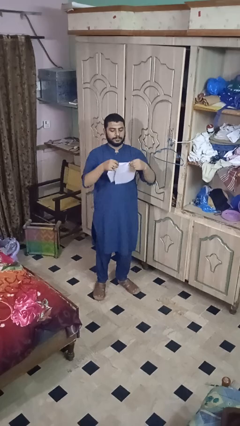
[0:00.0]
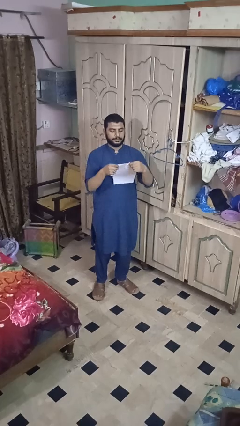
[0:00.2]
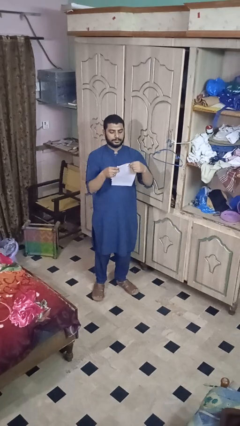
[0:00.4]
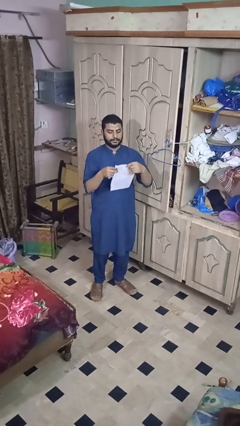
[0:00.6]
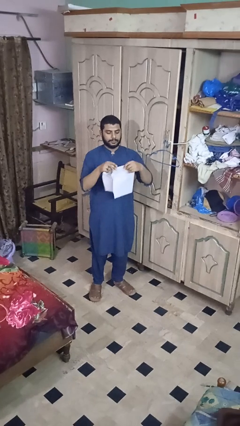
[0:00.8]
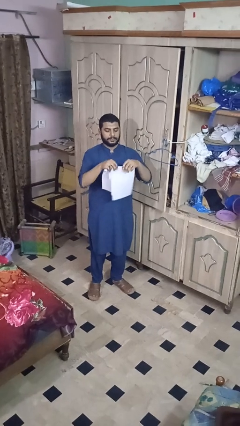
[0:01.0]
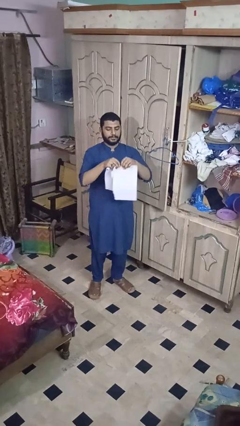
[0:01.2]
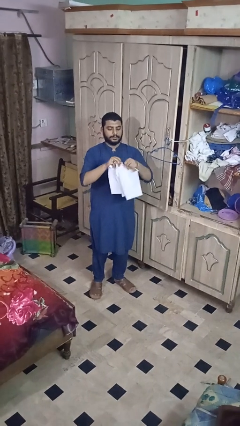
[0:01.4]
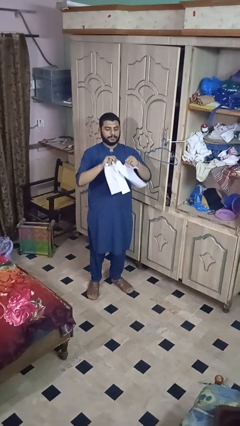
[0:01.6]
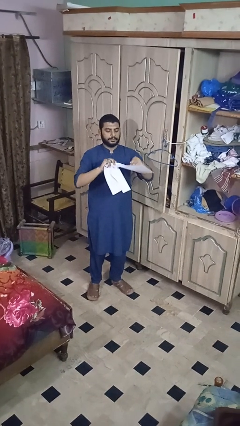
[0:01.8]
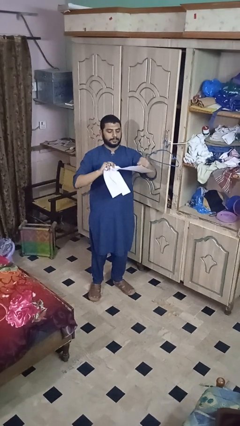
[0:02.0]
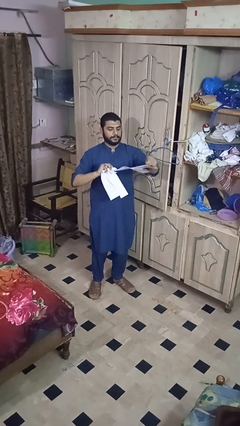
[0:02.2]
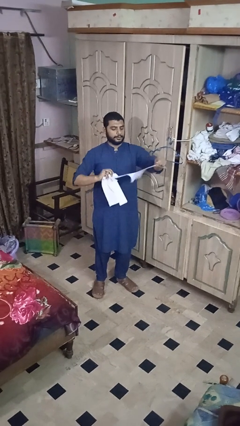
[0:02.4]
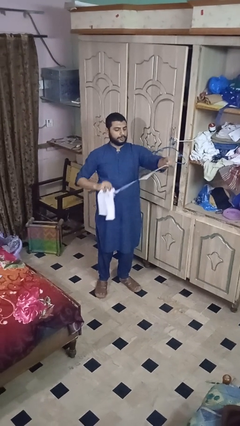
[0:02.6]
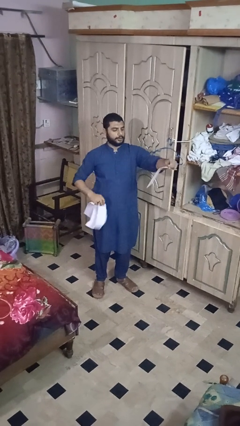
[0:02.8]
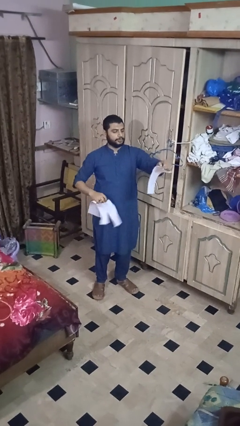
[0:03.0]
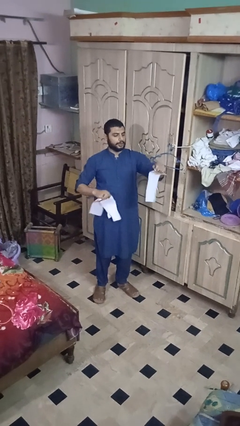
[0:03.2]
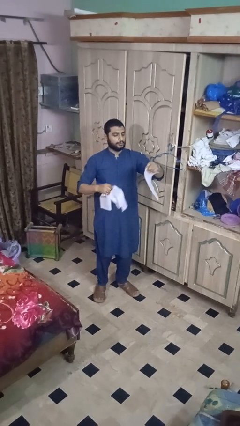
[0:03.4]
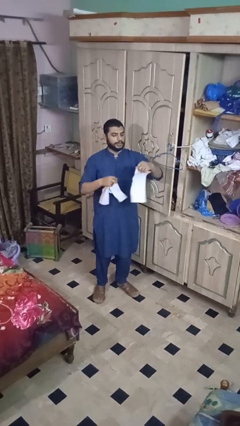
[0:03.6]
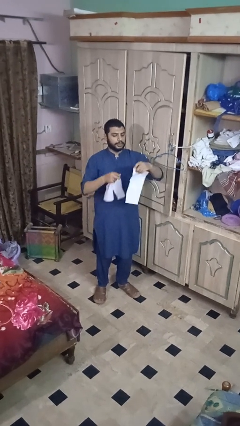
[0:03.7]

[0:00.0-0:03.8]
person tears paper

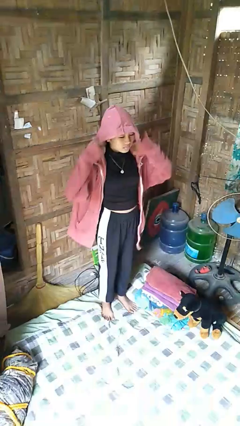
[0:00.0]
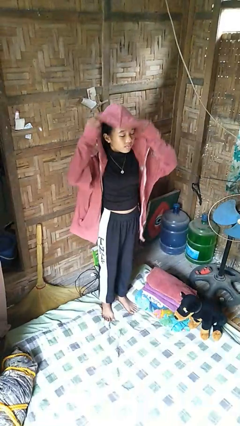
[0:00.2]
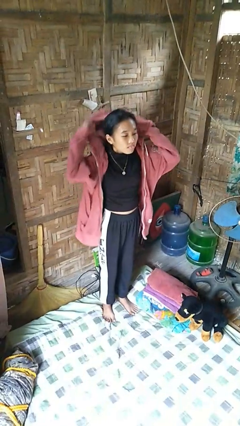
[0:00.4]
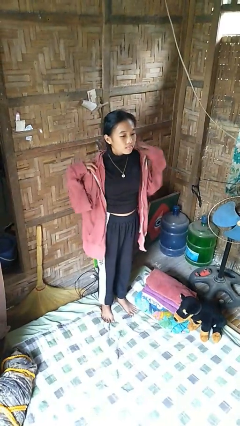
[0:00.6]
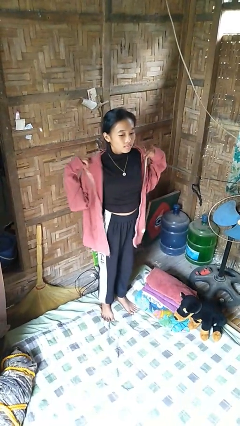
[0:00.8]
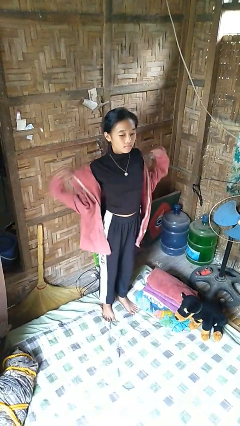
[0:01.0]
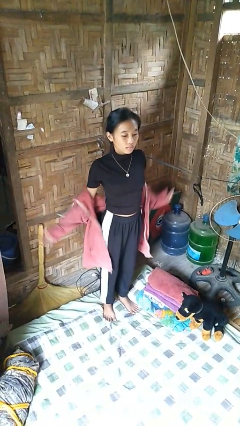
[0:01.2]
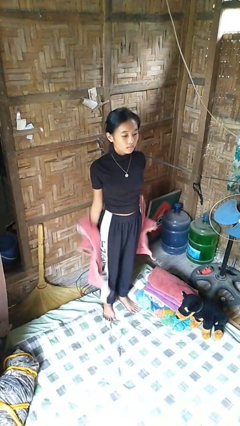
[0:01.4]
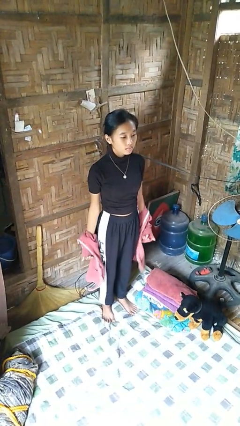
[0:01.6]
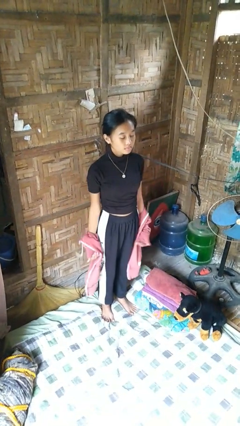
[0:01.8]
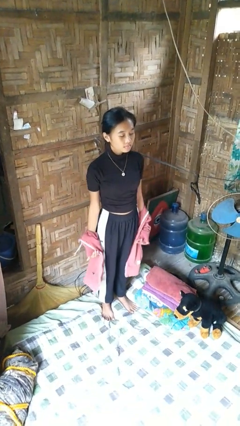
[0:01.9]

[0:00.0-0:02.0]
person takes off hoodie

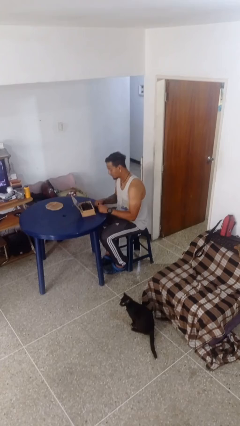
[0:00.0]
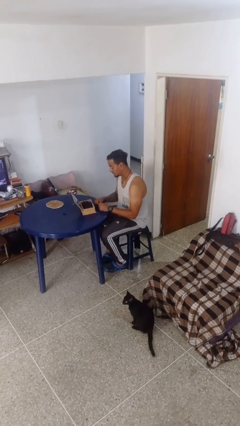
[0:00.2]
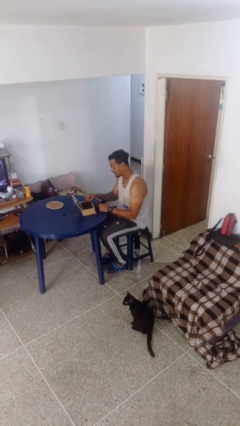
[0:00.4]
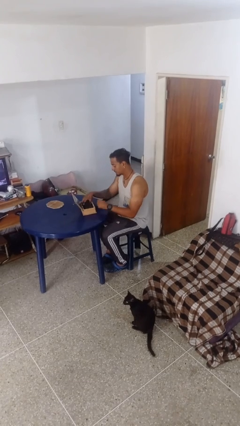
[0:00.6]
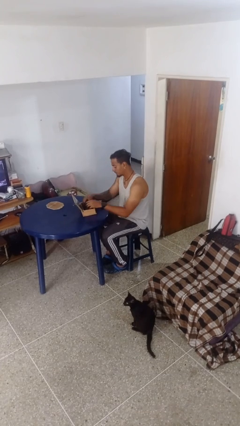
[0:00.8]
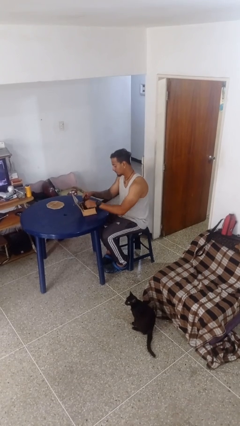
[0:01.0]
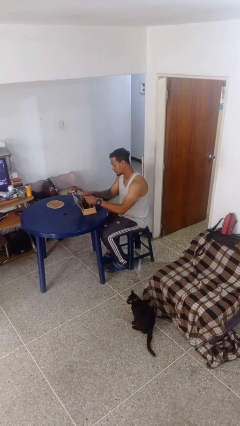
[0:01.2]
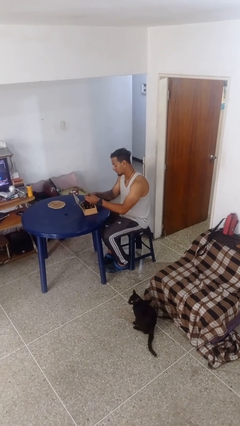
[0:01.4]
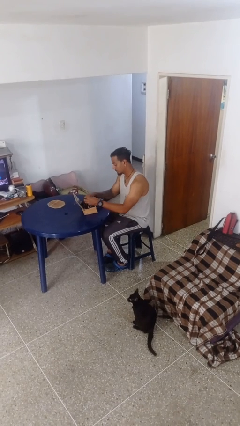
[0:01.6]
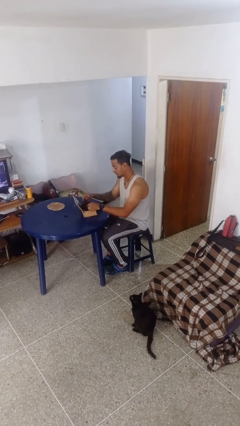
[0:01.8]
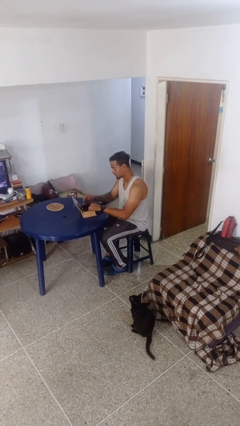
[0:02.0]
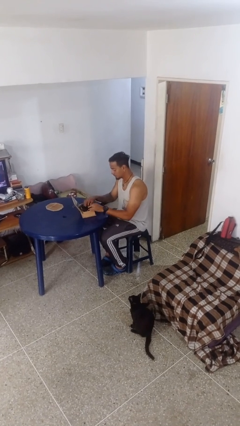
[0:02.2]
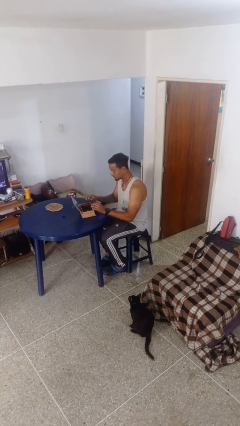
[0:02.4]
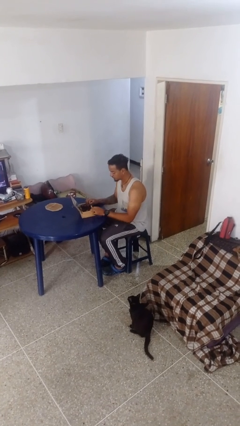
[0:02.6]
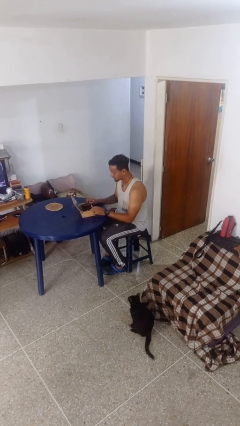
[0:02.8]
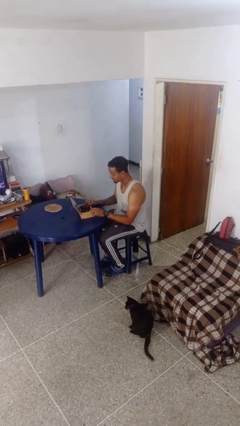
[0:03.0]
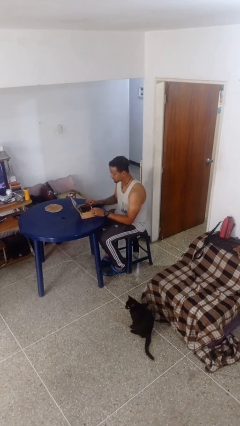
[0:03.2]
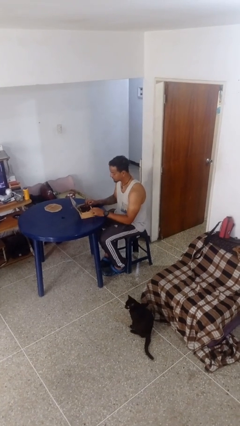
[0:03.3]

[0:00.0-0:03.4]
person searches jewelry box

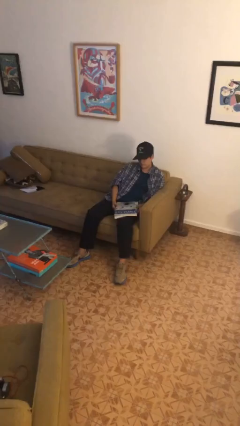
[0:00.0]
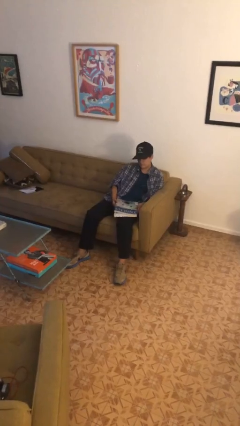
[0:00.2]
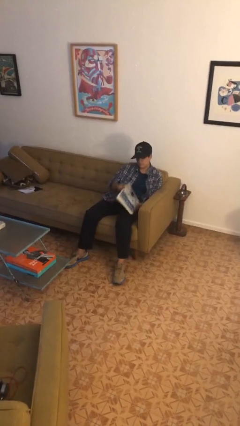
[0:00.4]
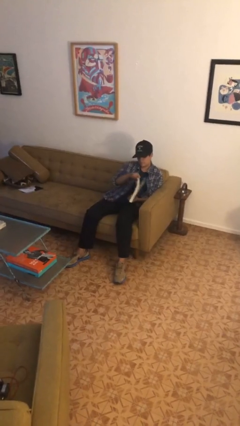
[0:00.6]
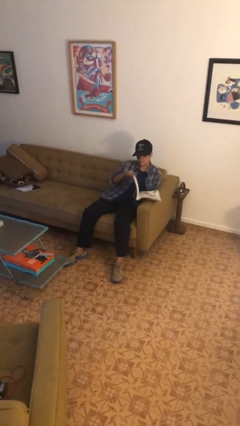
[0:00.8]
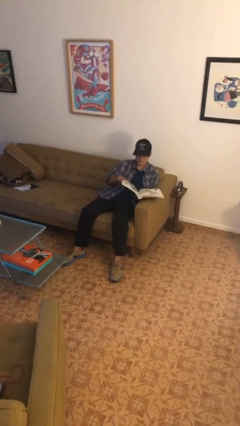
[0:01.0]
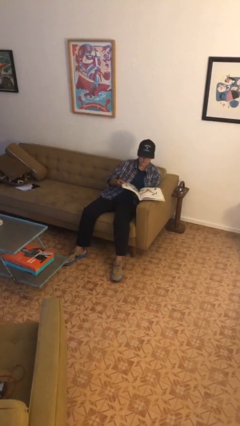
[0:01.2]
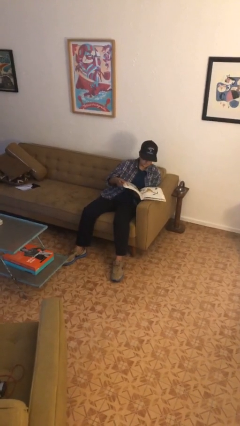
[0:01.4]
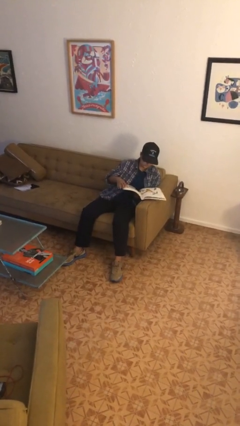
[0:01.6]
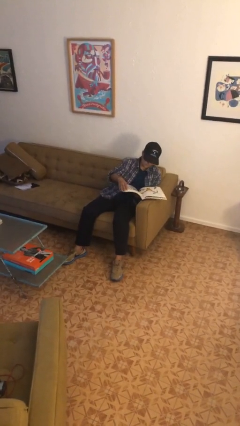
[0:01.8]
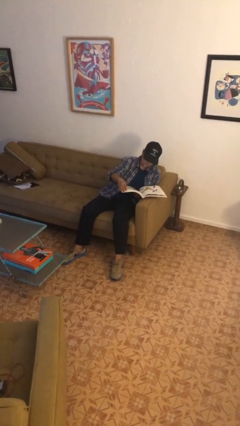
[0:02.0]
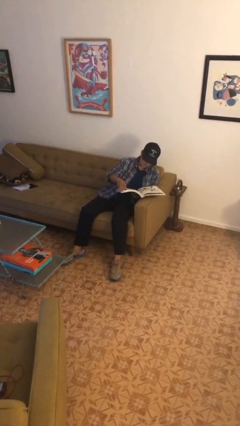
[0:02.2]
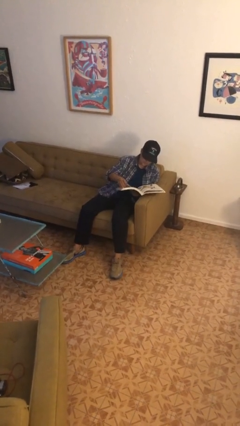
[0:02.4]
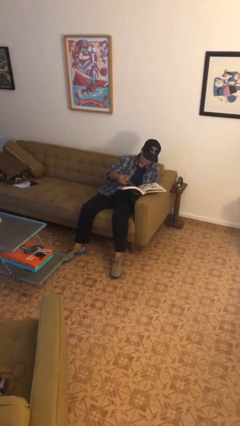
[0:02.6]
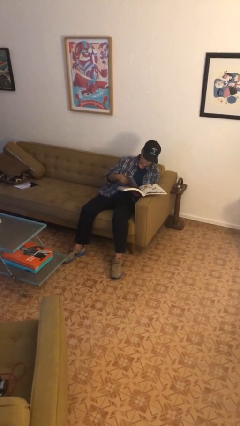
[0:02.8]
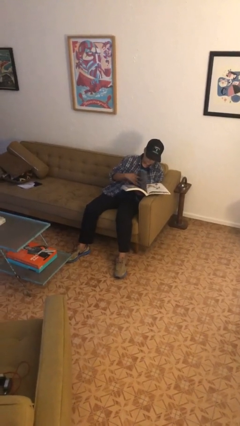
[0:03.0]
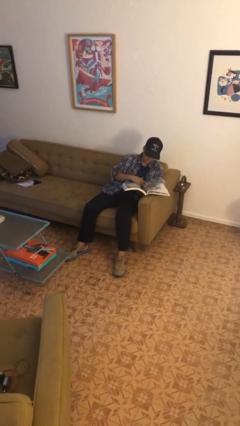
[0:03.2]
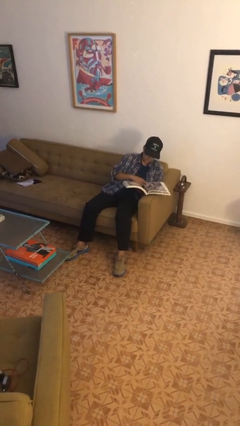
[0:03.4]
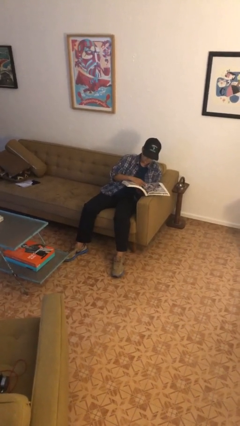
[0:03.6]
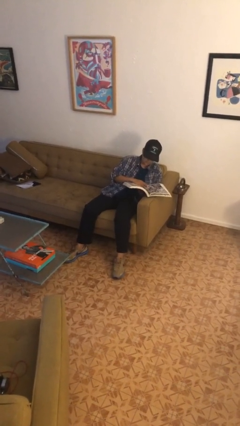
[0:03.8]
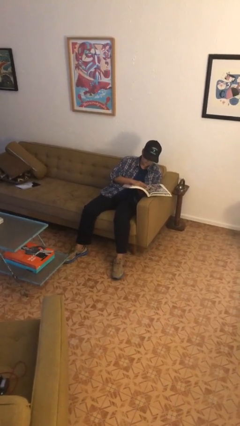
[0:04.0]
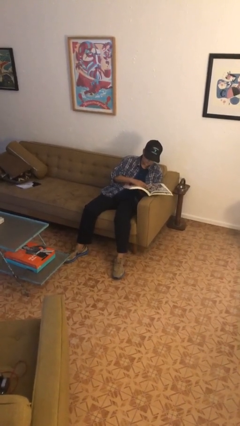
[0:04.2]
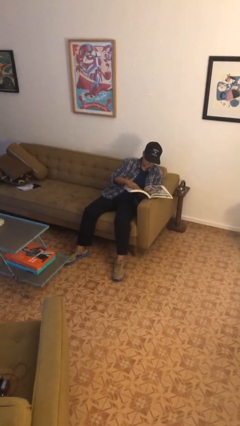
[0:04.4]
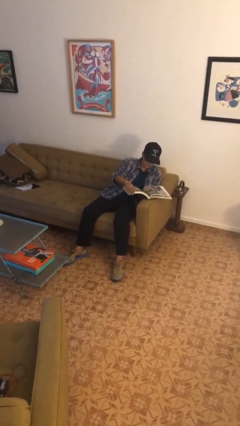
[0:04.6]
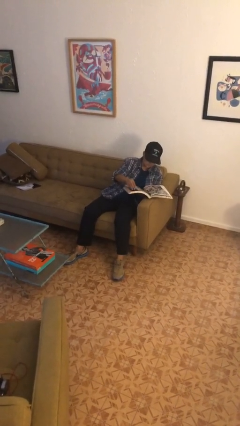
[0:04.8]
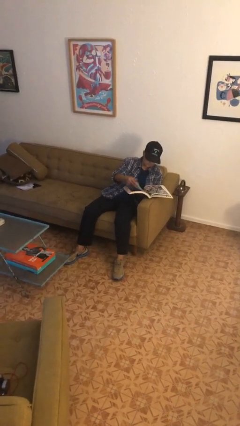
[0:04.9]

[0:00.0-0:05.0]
person reads book

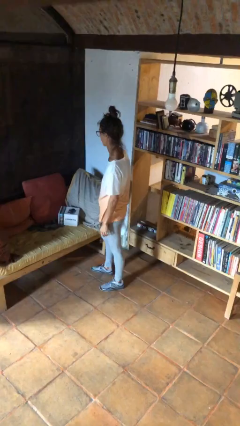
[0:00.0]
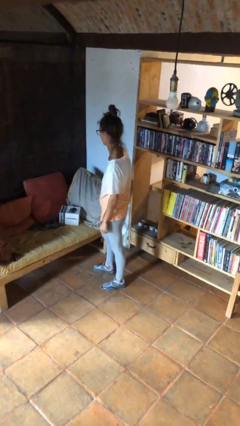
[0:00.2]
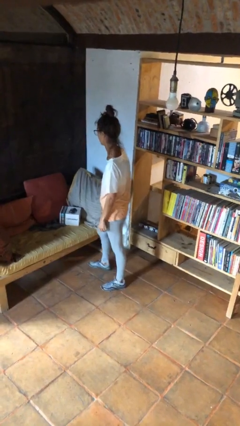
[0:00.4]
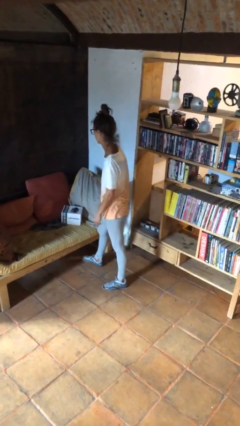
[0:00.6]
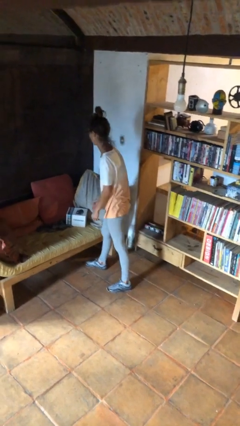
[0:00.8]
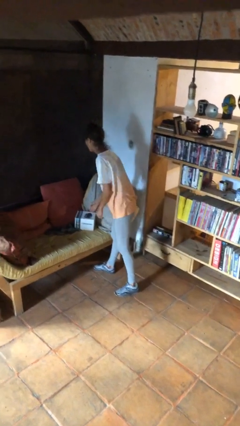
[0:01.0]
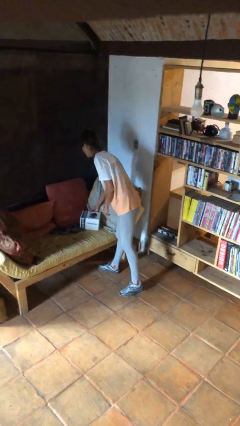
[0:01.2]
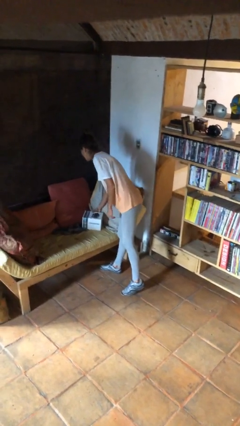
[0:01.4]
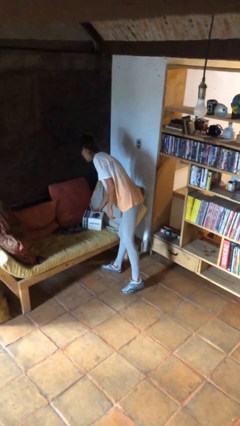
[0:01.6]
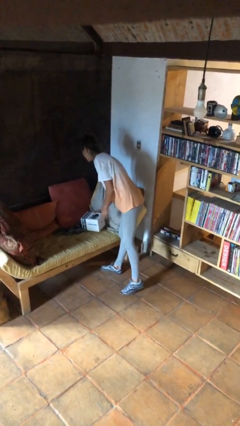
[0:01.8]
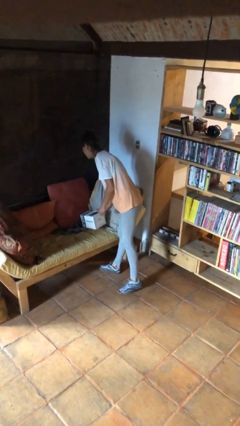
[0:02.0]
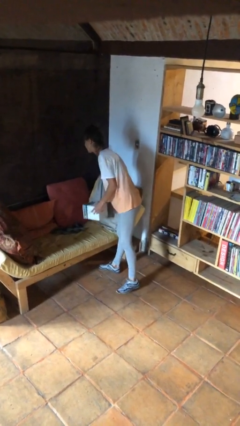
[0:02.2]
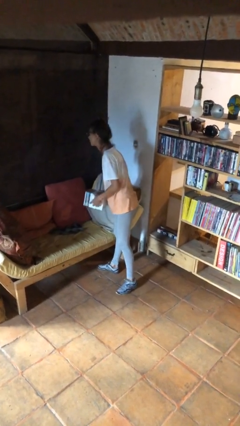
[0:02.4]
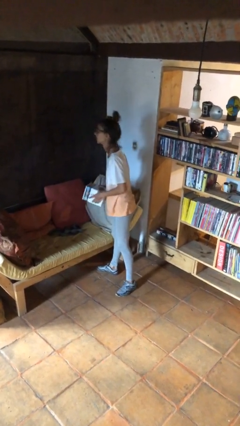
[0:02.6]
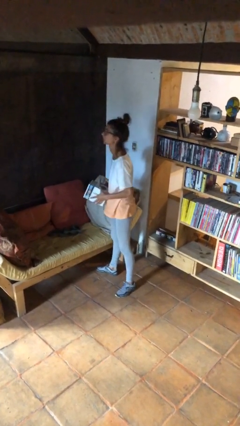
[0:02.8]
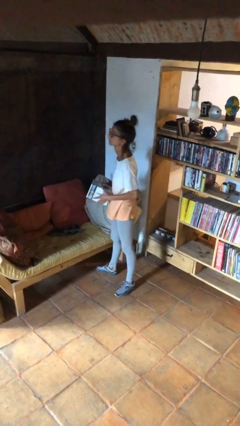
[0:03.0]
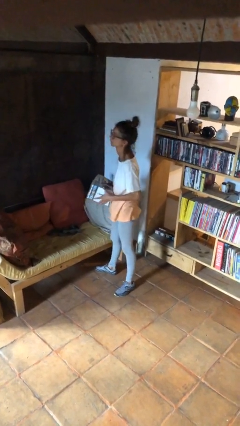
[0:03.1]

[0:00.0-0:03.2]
person picks up object from couch

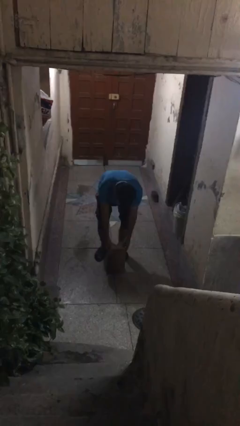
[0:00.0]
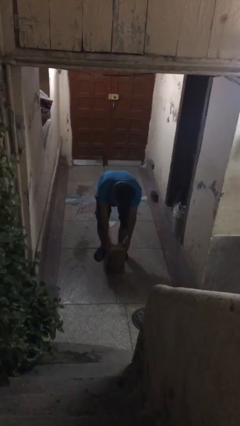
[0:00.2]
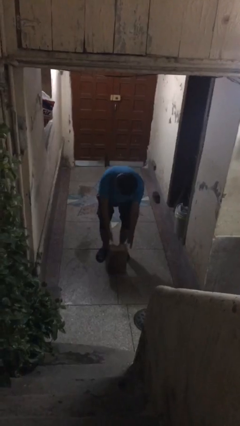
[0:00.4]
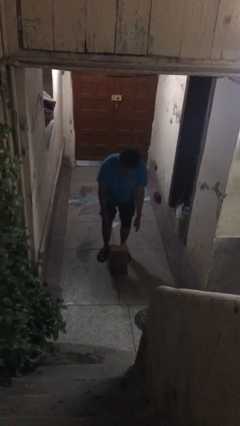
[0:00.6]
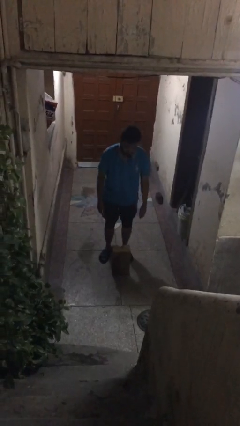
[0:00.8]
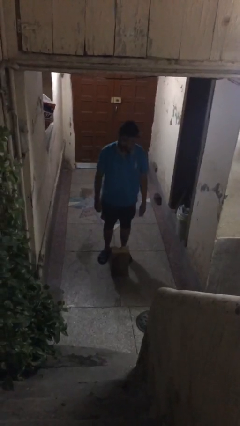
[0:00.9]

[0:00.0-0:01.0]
person puts down object on floor
